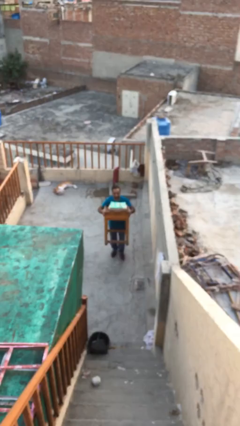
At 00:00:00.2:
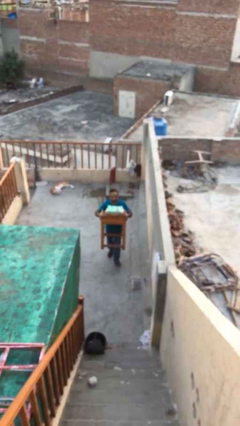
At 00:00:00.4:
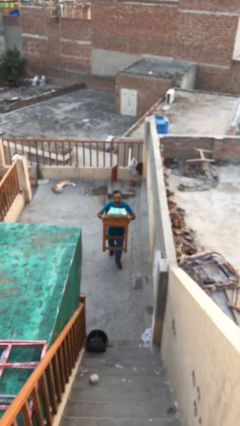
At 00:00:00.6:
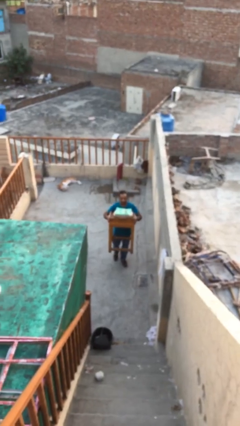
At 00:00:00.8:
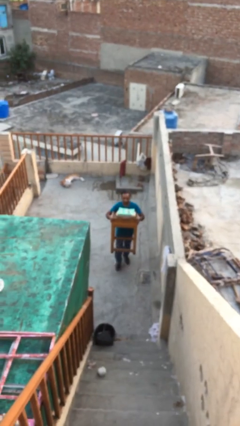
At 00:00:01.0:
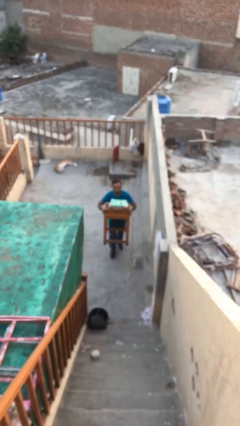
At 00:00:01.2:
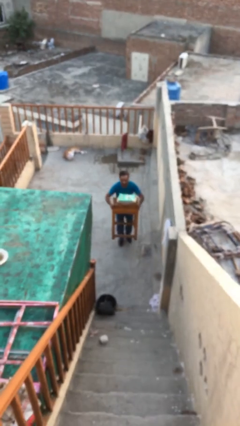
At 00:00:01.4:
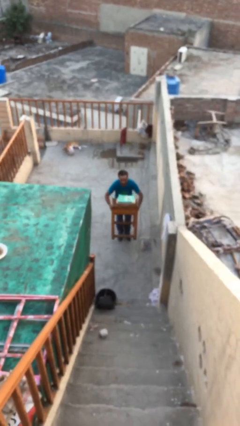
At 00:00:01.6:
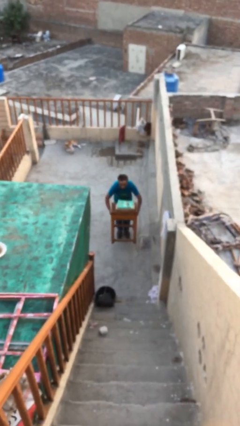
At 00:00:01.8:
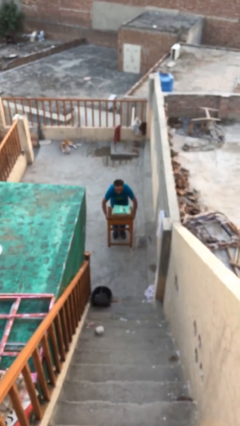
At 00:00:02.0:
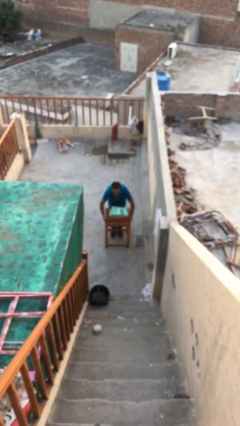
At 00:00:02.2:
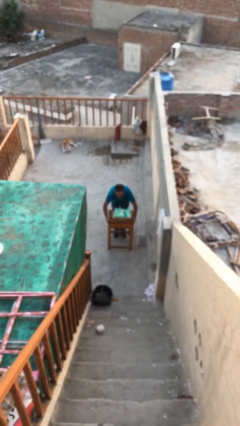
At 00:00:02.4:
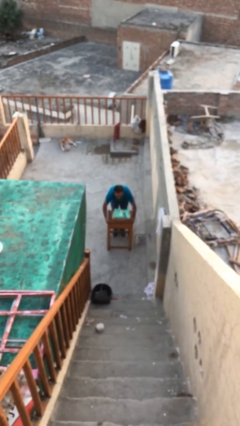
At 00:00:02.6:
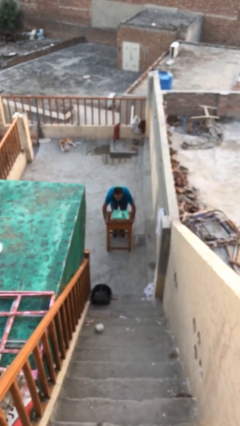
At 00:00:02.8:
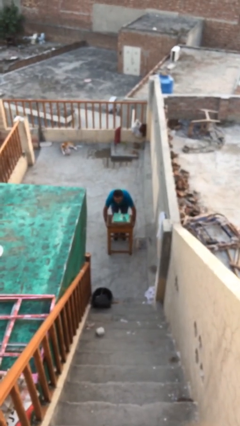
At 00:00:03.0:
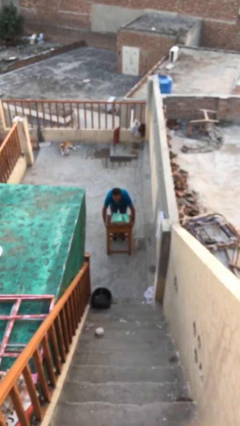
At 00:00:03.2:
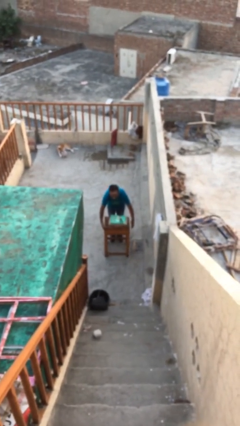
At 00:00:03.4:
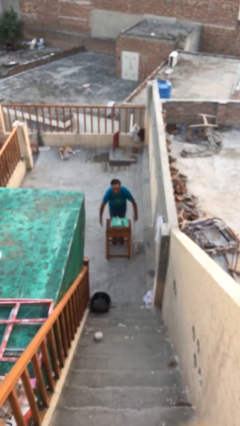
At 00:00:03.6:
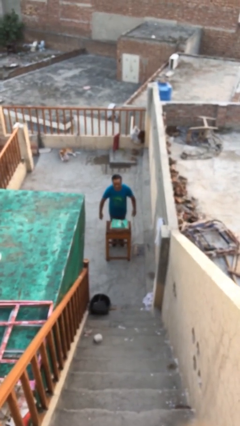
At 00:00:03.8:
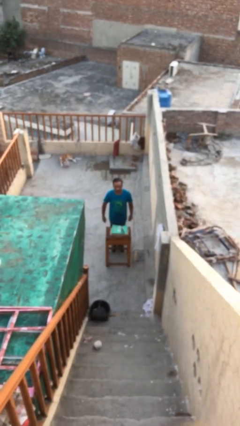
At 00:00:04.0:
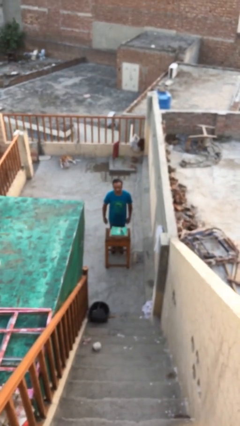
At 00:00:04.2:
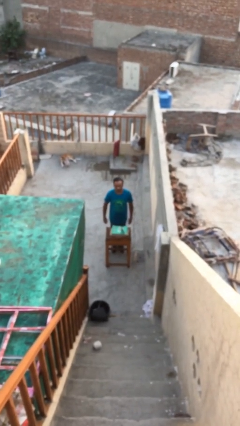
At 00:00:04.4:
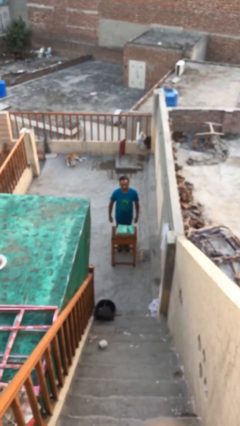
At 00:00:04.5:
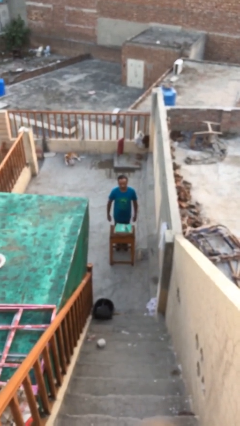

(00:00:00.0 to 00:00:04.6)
person puts down object on floor

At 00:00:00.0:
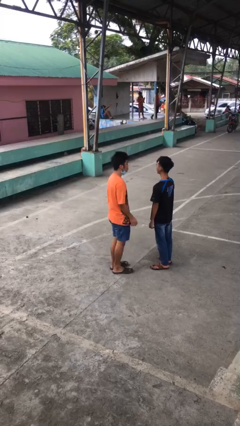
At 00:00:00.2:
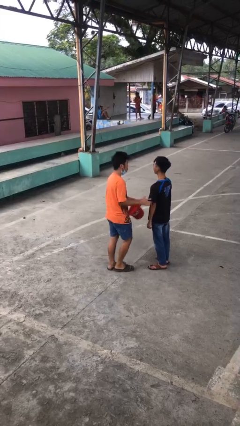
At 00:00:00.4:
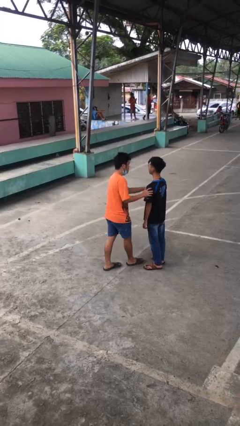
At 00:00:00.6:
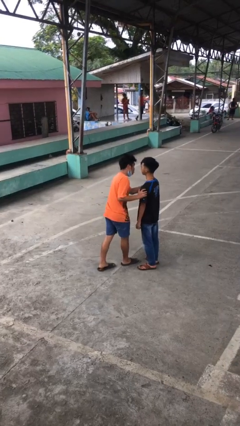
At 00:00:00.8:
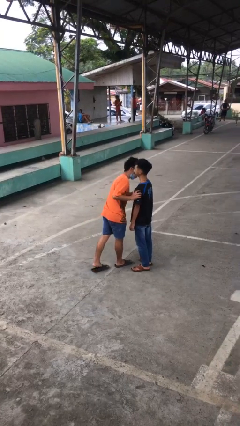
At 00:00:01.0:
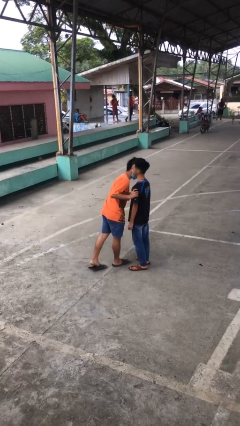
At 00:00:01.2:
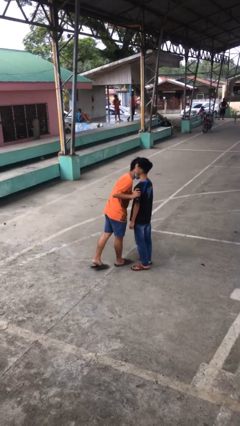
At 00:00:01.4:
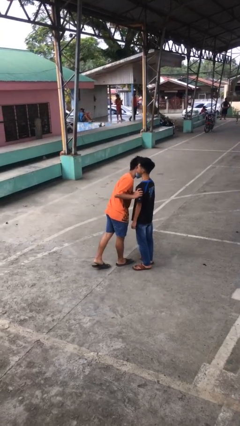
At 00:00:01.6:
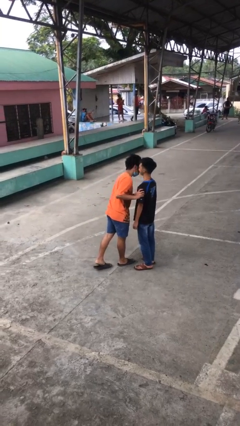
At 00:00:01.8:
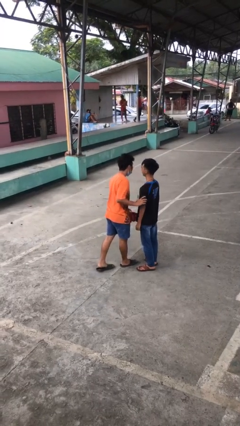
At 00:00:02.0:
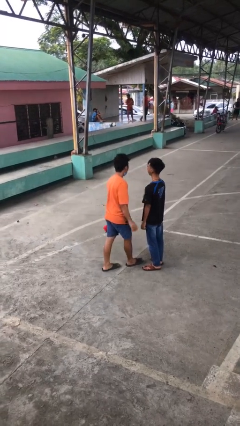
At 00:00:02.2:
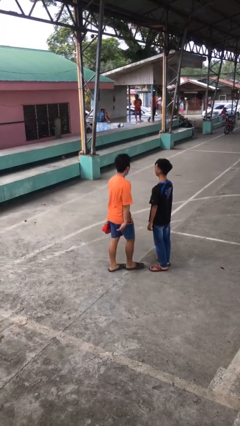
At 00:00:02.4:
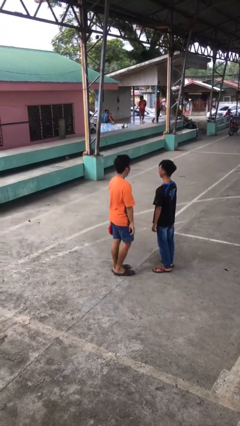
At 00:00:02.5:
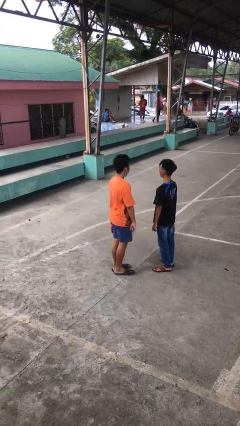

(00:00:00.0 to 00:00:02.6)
person kisses cheek of person

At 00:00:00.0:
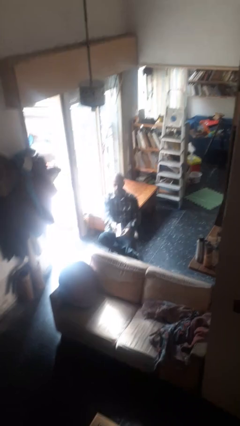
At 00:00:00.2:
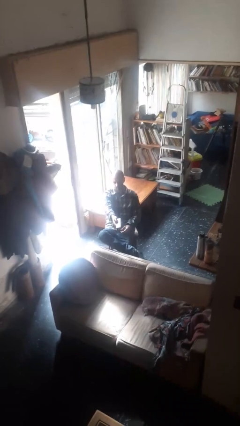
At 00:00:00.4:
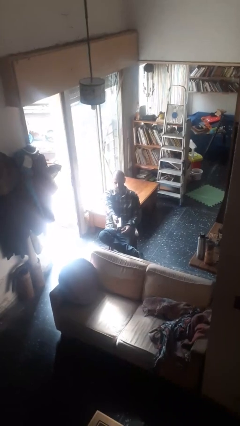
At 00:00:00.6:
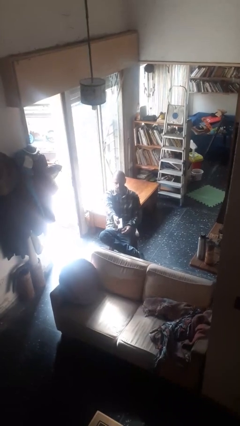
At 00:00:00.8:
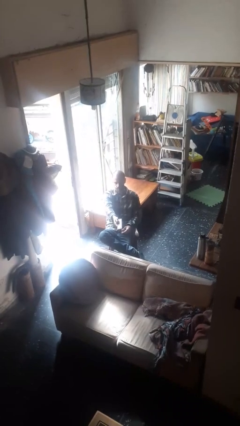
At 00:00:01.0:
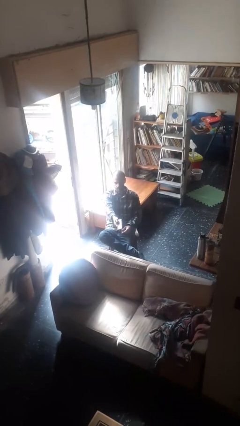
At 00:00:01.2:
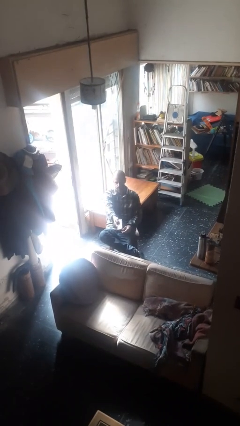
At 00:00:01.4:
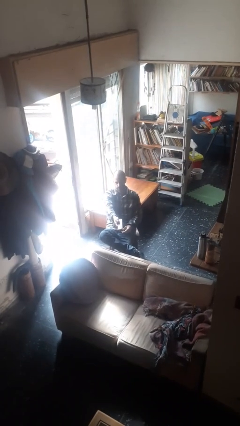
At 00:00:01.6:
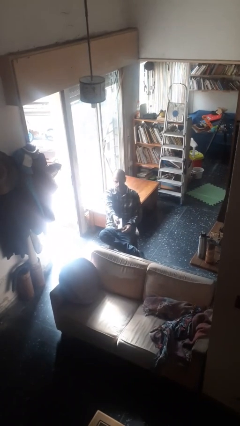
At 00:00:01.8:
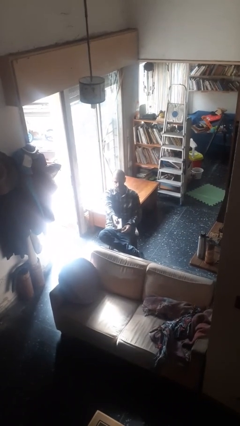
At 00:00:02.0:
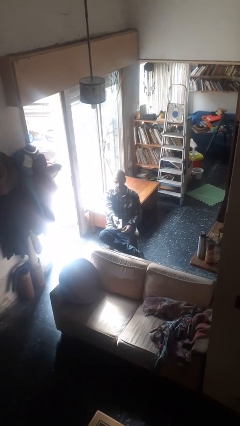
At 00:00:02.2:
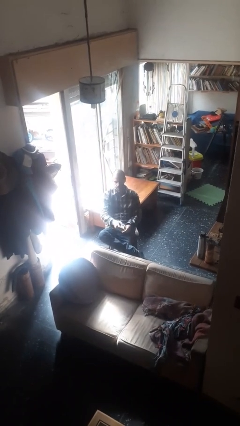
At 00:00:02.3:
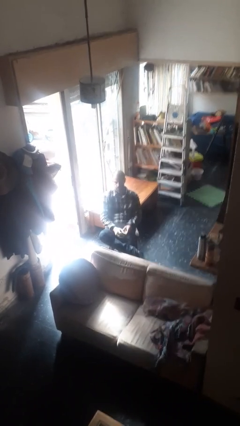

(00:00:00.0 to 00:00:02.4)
person uses television remote

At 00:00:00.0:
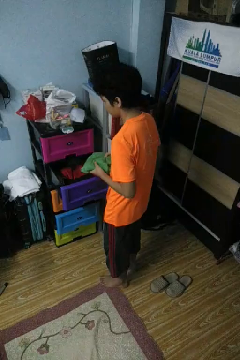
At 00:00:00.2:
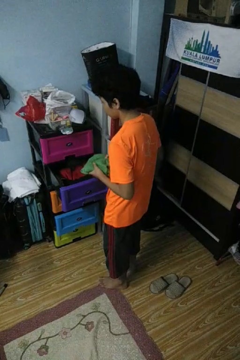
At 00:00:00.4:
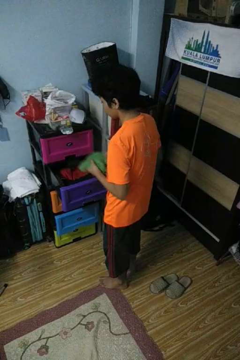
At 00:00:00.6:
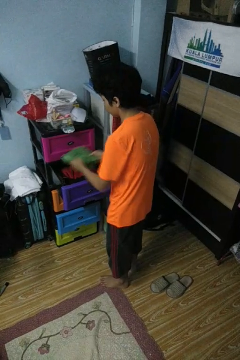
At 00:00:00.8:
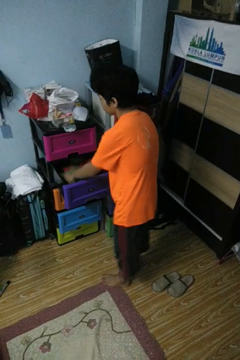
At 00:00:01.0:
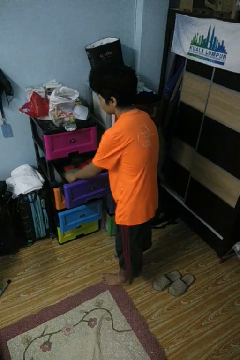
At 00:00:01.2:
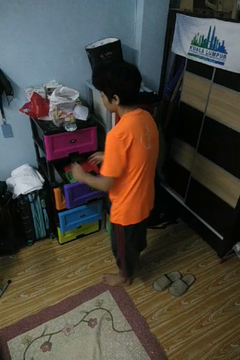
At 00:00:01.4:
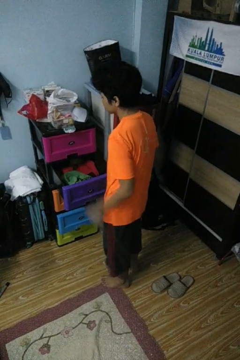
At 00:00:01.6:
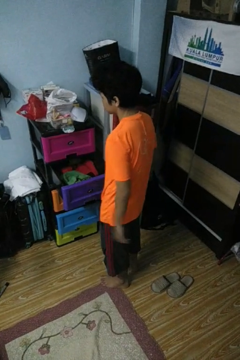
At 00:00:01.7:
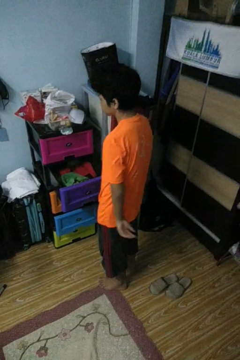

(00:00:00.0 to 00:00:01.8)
person puts clothes into dresser

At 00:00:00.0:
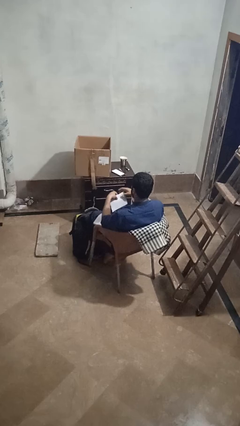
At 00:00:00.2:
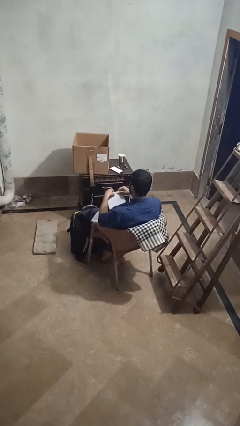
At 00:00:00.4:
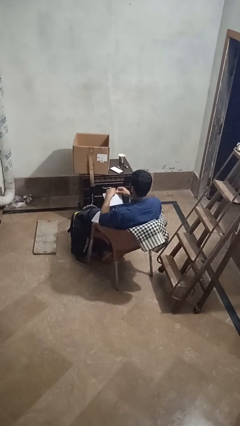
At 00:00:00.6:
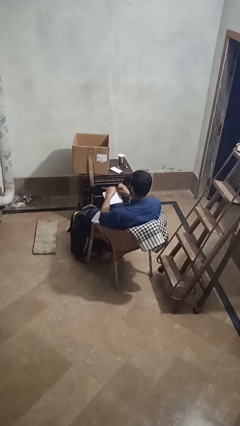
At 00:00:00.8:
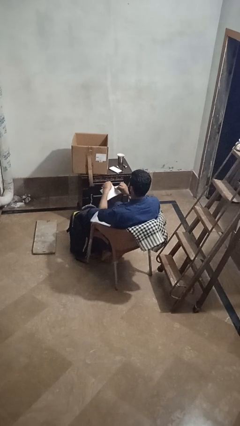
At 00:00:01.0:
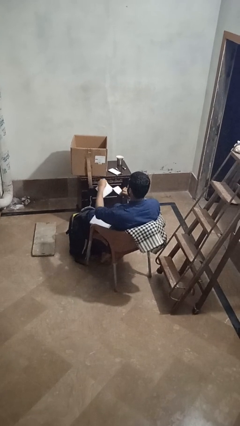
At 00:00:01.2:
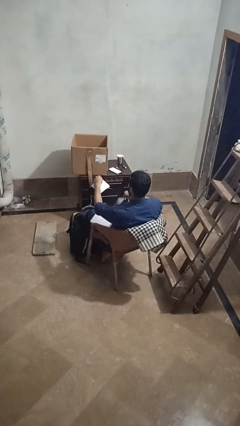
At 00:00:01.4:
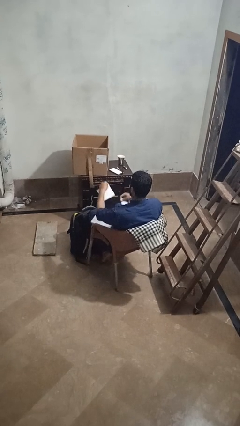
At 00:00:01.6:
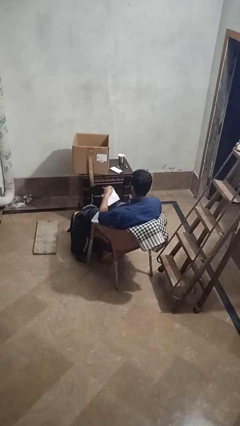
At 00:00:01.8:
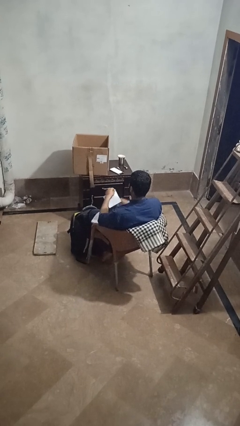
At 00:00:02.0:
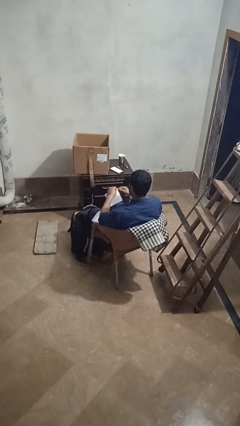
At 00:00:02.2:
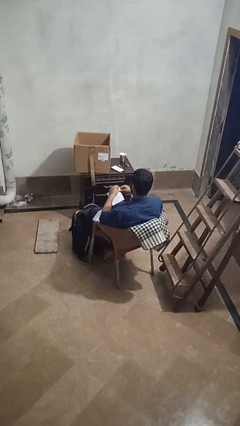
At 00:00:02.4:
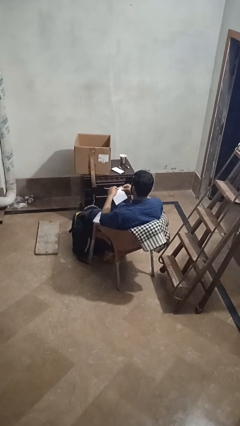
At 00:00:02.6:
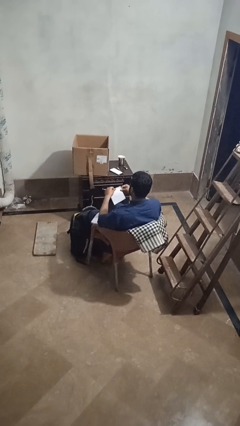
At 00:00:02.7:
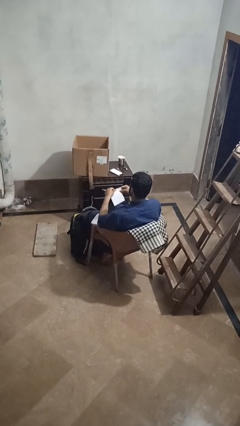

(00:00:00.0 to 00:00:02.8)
person tears paper

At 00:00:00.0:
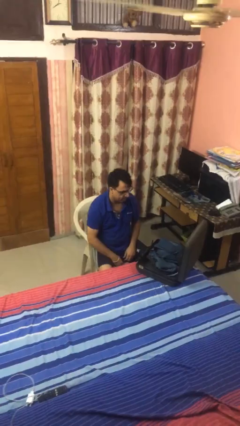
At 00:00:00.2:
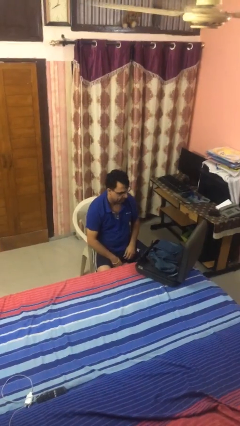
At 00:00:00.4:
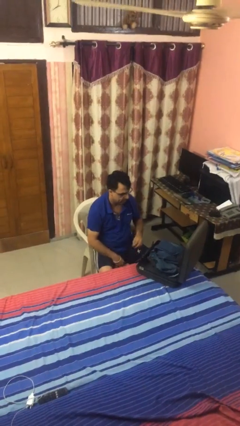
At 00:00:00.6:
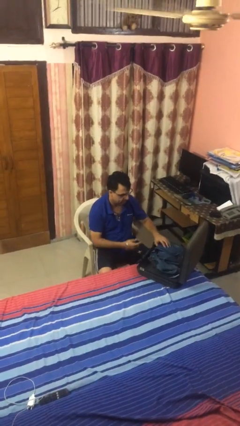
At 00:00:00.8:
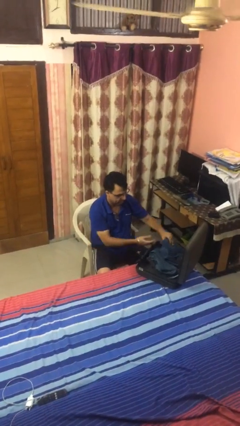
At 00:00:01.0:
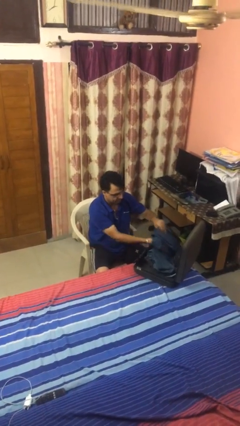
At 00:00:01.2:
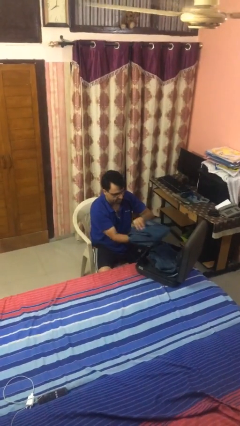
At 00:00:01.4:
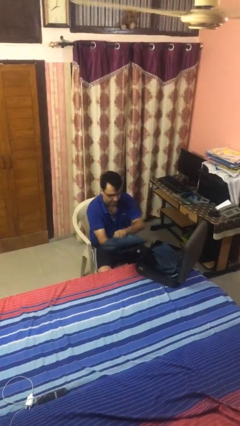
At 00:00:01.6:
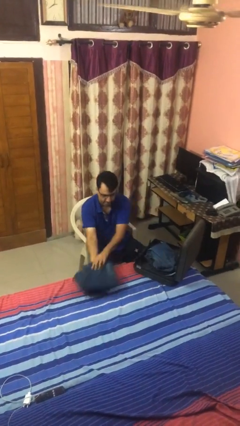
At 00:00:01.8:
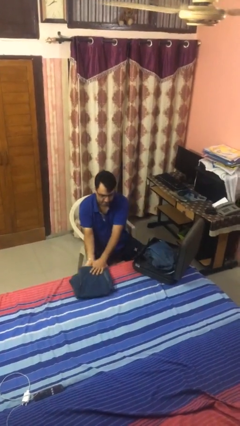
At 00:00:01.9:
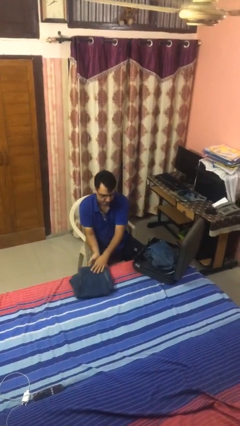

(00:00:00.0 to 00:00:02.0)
person unloads clothes from suitcase

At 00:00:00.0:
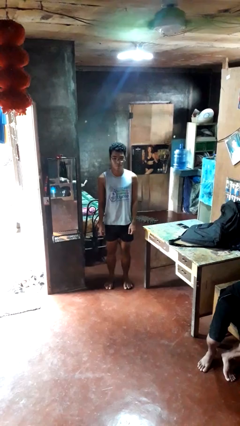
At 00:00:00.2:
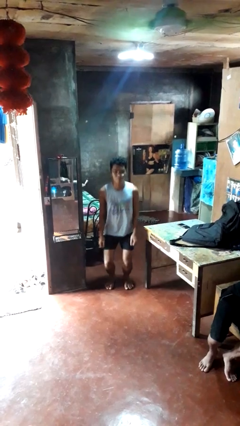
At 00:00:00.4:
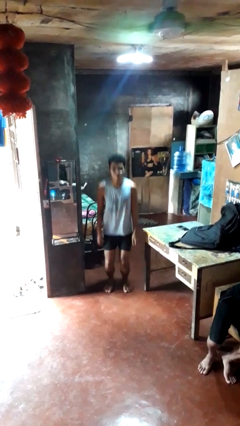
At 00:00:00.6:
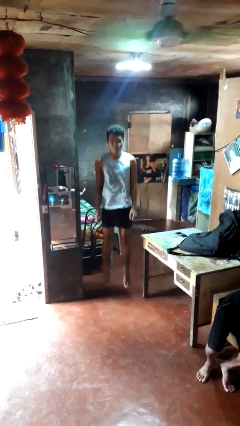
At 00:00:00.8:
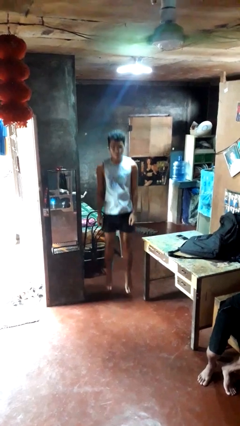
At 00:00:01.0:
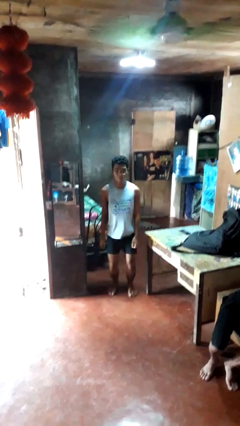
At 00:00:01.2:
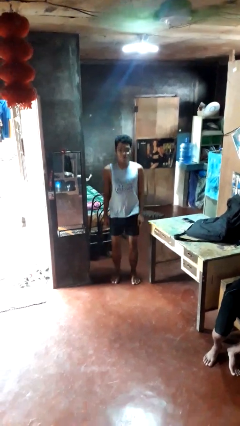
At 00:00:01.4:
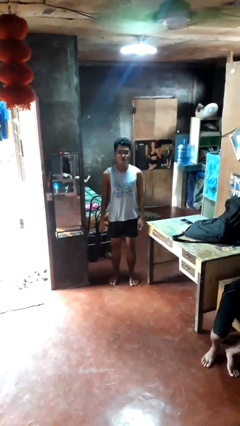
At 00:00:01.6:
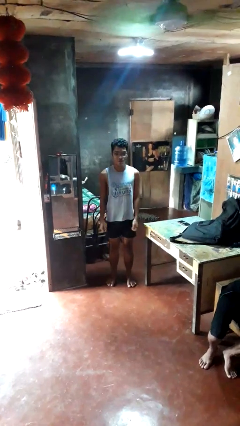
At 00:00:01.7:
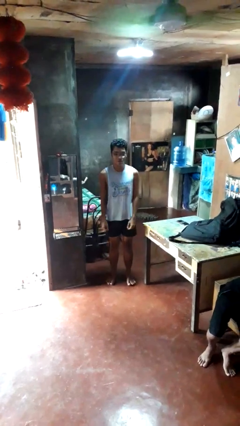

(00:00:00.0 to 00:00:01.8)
person jumps
